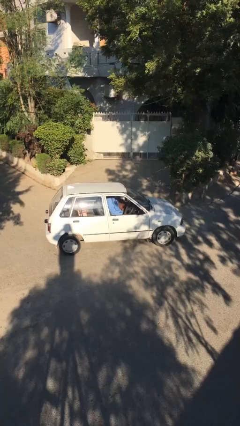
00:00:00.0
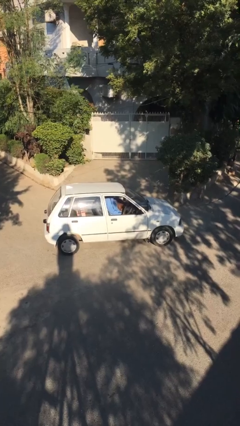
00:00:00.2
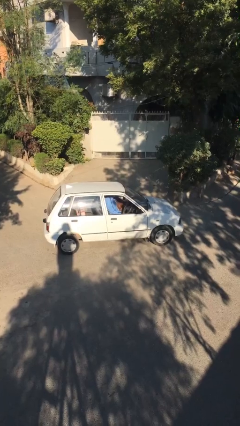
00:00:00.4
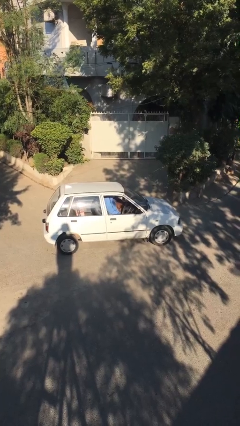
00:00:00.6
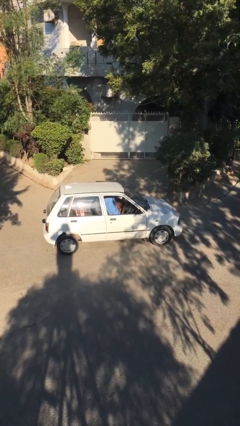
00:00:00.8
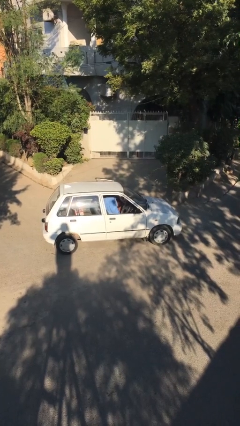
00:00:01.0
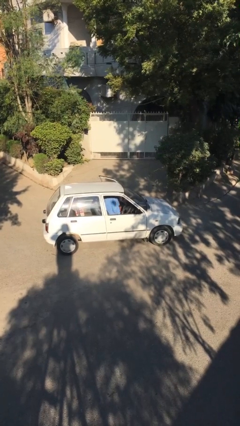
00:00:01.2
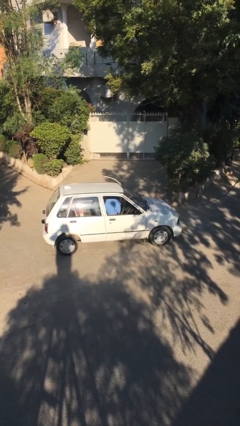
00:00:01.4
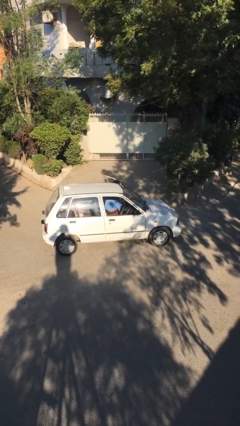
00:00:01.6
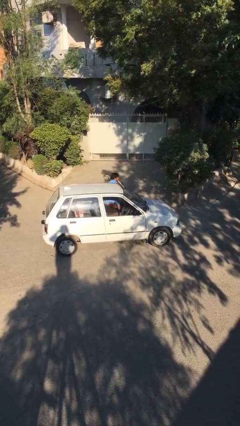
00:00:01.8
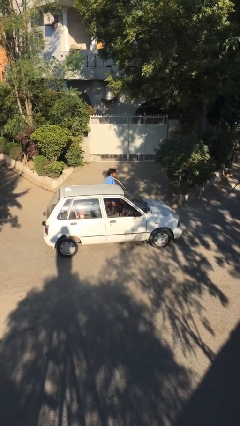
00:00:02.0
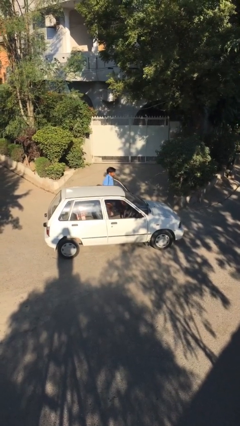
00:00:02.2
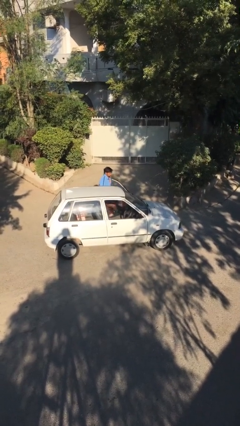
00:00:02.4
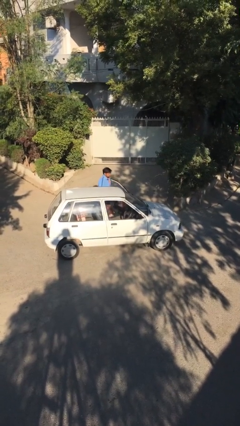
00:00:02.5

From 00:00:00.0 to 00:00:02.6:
car drops off person

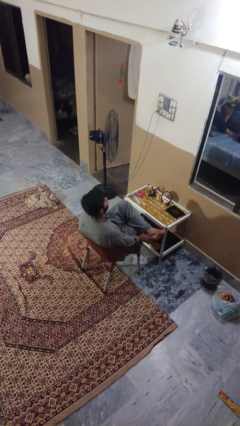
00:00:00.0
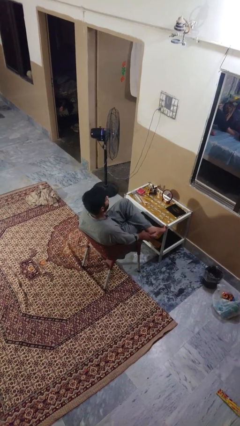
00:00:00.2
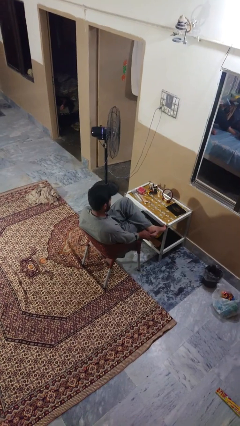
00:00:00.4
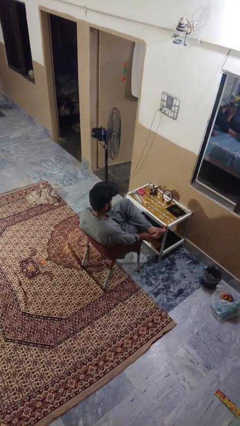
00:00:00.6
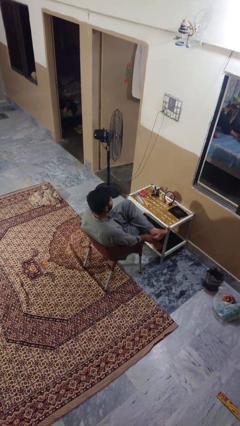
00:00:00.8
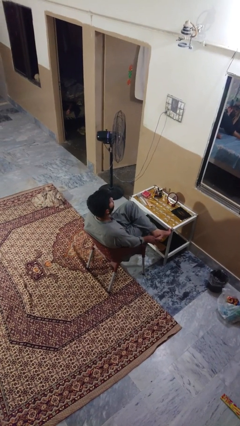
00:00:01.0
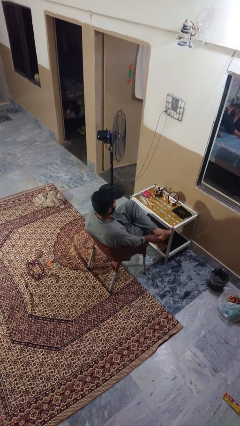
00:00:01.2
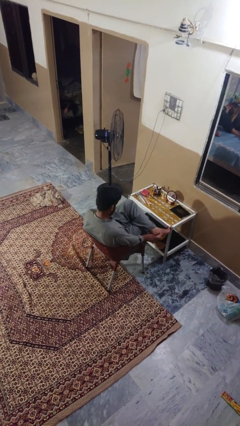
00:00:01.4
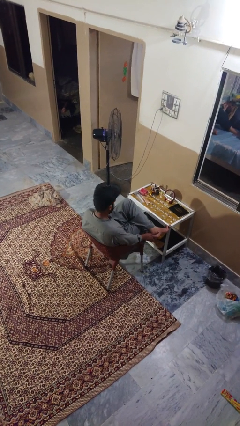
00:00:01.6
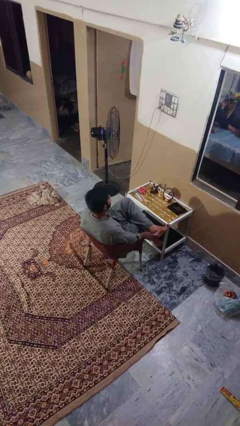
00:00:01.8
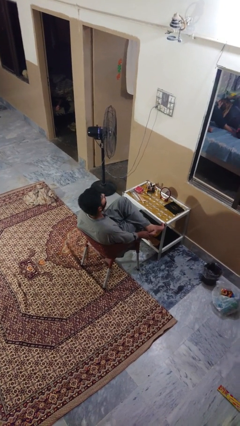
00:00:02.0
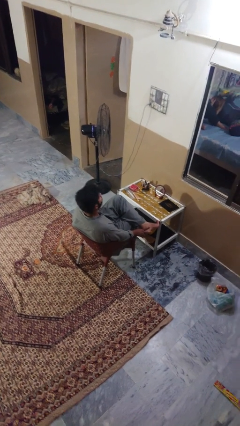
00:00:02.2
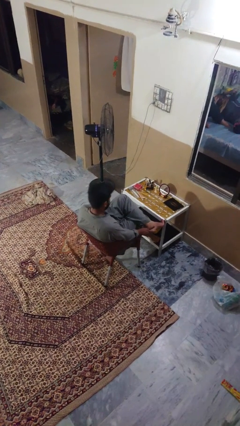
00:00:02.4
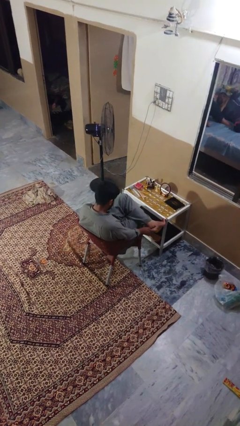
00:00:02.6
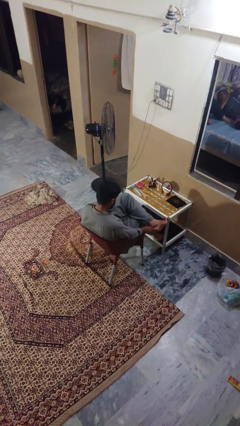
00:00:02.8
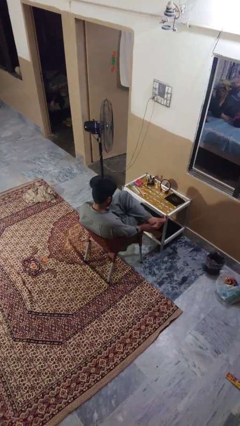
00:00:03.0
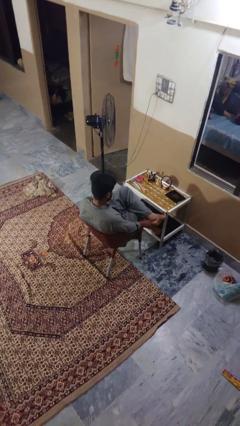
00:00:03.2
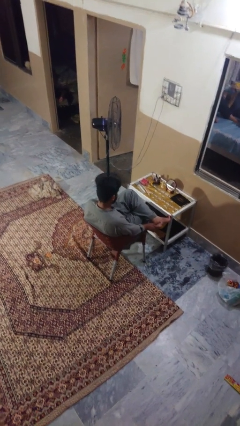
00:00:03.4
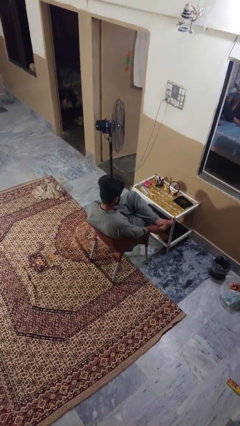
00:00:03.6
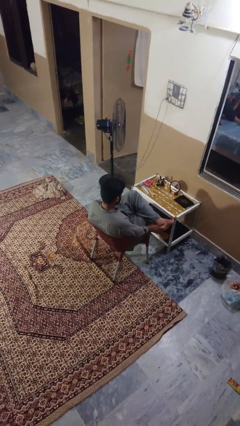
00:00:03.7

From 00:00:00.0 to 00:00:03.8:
person nods head

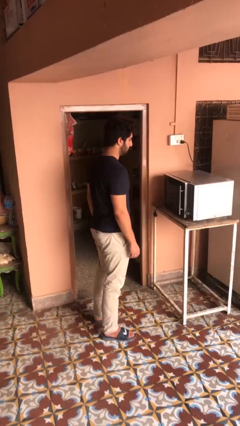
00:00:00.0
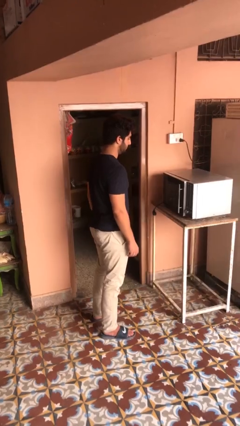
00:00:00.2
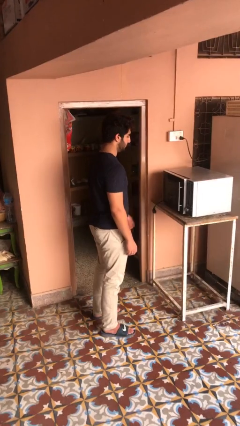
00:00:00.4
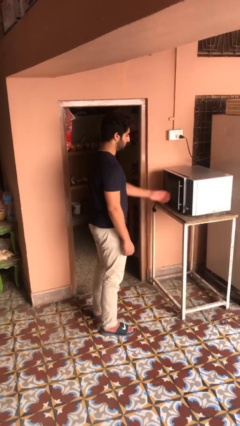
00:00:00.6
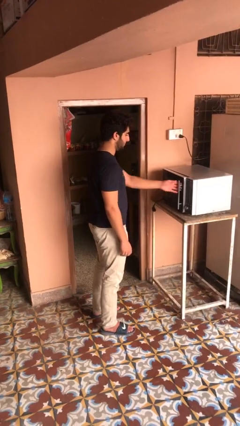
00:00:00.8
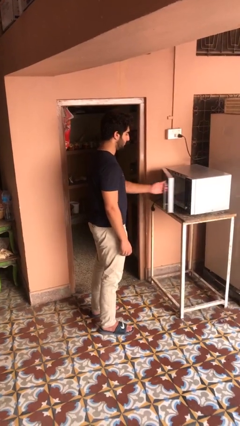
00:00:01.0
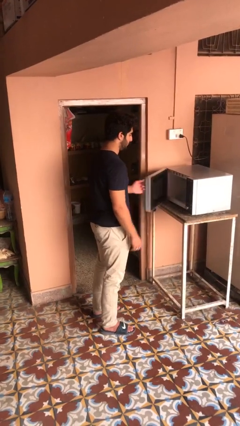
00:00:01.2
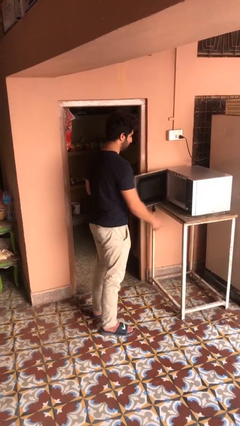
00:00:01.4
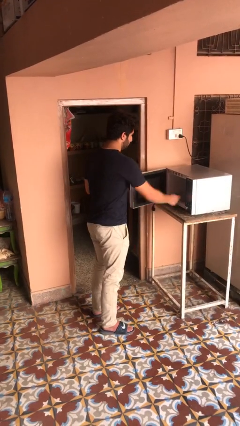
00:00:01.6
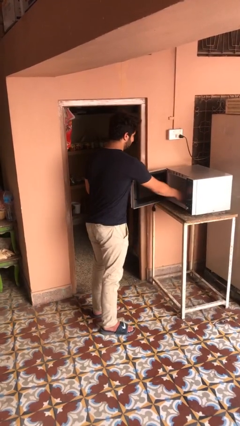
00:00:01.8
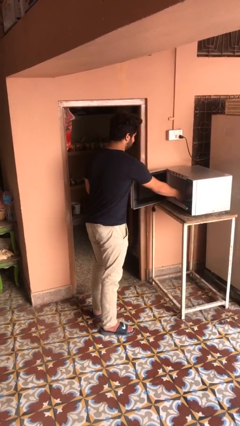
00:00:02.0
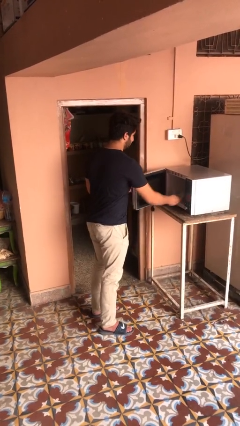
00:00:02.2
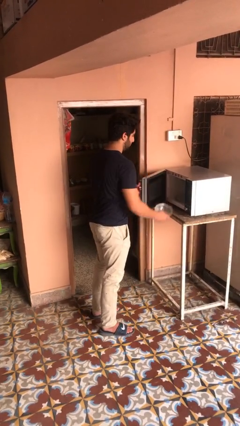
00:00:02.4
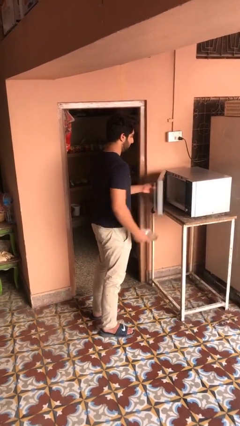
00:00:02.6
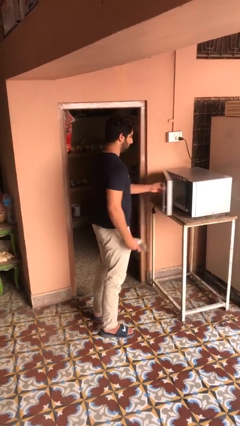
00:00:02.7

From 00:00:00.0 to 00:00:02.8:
person takes object from microwave

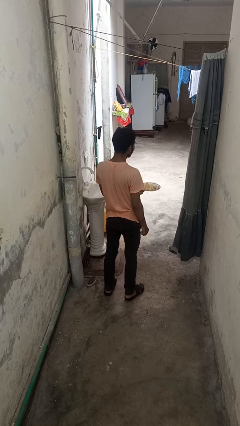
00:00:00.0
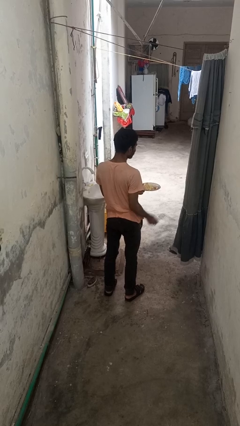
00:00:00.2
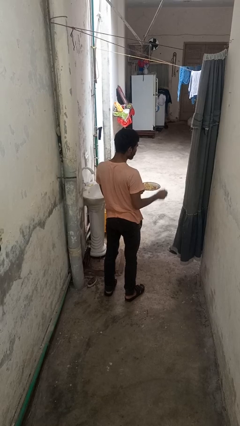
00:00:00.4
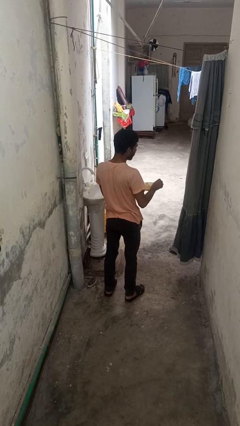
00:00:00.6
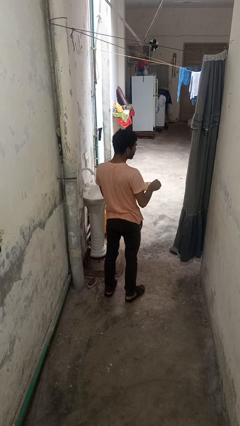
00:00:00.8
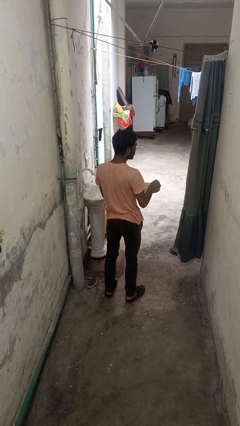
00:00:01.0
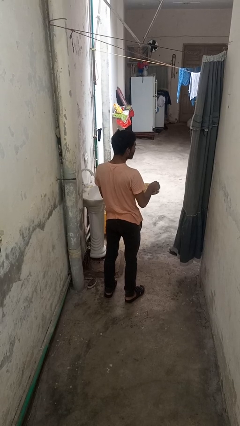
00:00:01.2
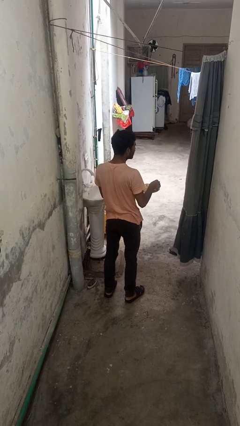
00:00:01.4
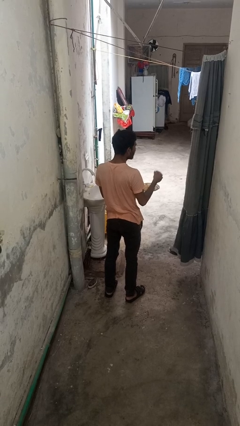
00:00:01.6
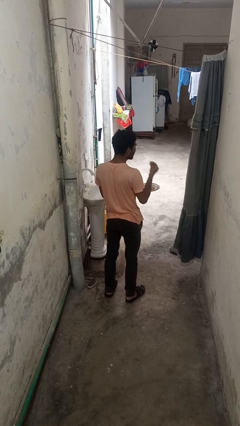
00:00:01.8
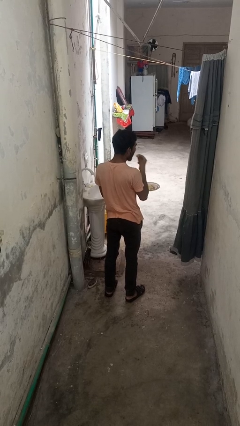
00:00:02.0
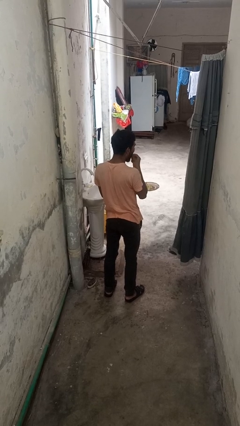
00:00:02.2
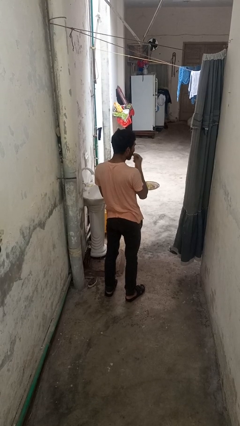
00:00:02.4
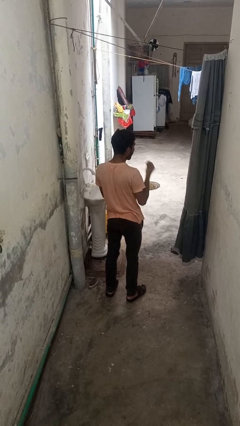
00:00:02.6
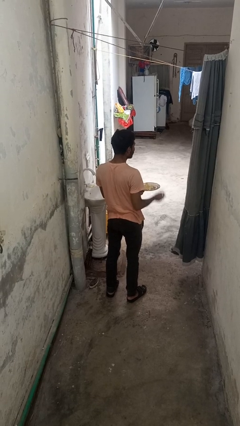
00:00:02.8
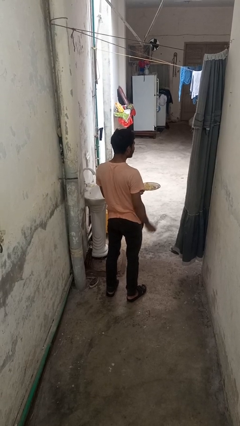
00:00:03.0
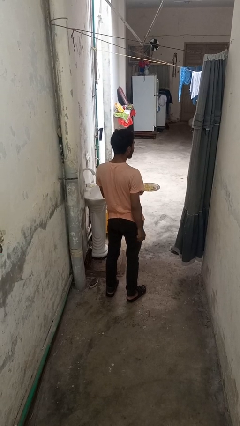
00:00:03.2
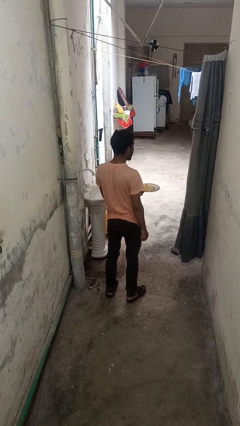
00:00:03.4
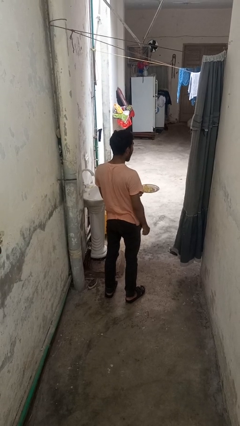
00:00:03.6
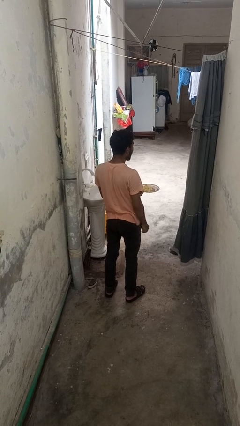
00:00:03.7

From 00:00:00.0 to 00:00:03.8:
person eats with hands

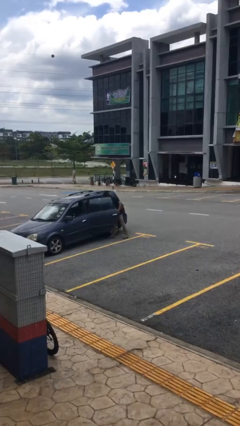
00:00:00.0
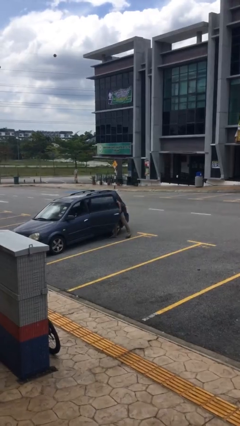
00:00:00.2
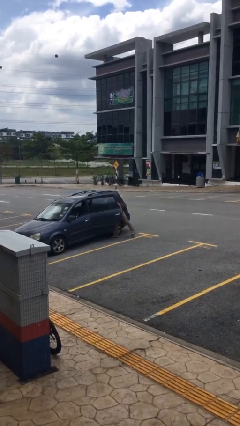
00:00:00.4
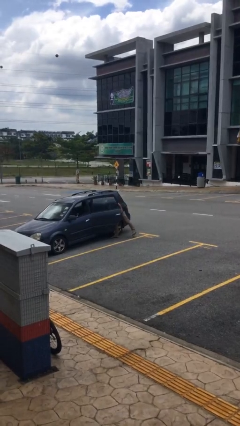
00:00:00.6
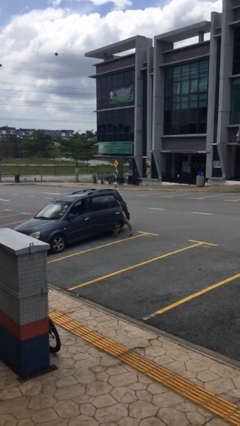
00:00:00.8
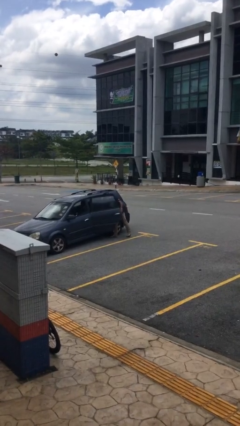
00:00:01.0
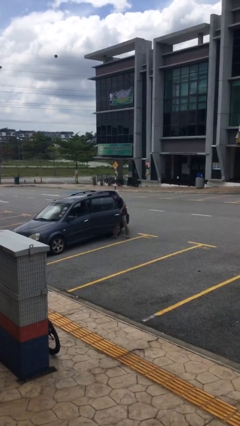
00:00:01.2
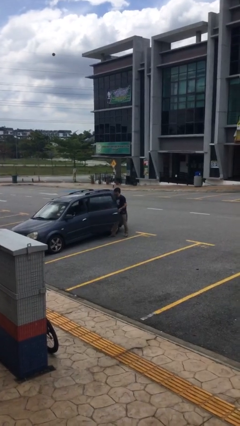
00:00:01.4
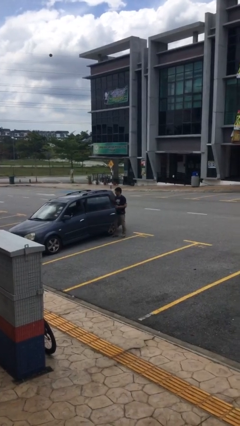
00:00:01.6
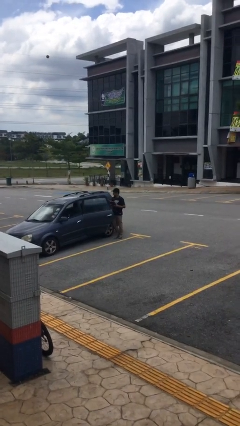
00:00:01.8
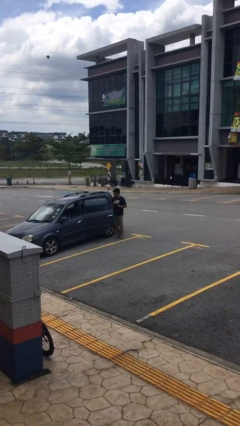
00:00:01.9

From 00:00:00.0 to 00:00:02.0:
person unloads car

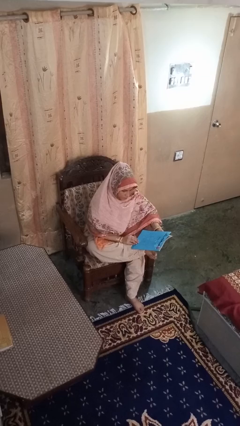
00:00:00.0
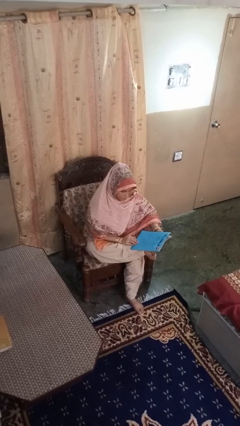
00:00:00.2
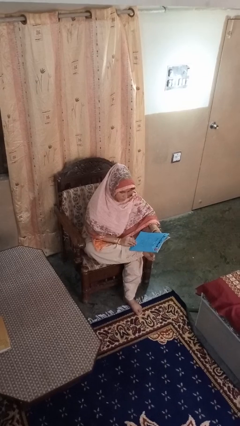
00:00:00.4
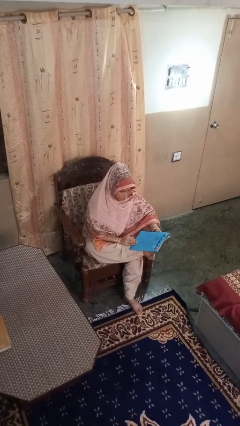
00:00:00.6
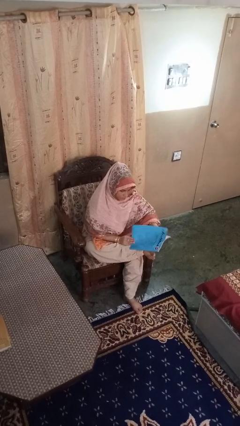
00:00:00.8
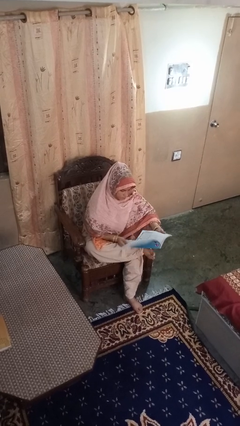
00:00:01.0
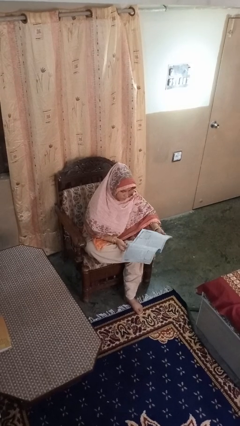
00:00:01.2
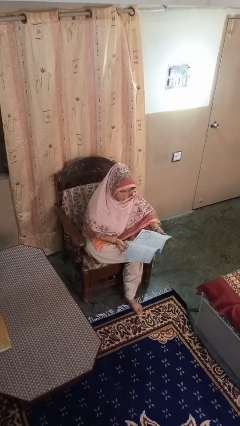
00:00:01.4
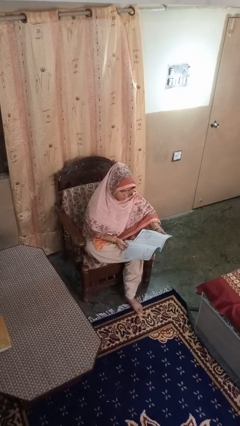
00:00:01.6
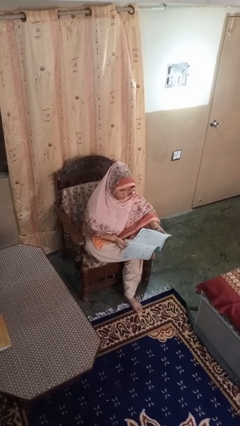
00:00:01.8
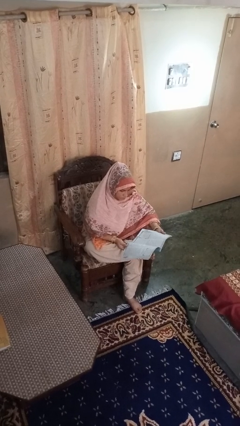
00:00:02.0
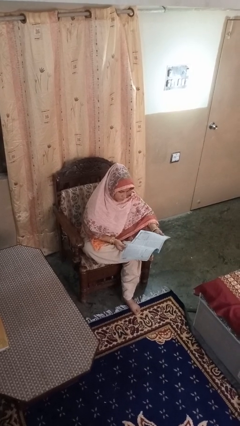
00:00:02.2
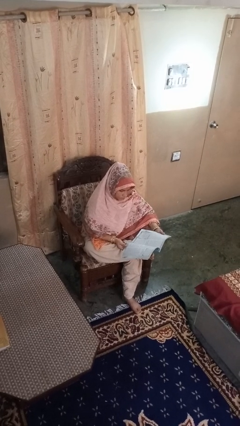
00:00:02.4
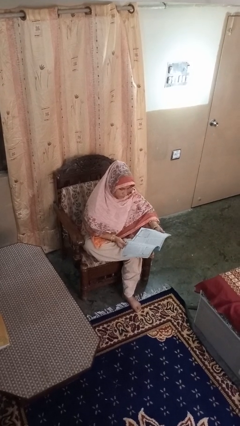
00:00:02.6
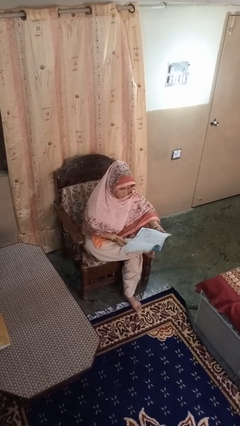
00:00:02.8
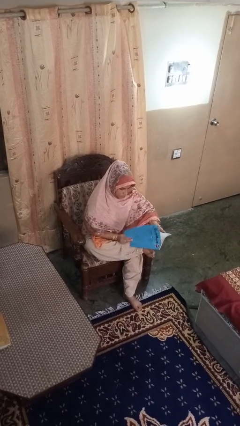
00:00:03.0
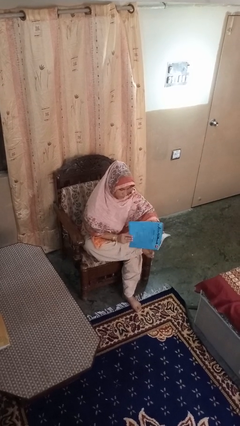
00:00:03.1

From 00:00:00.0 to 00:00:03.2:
person reads magazine
